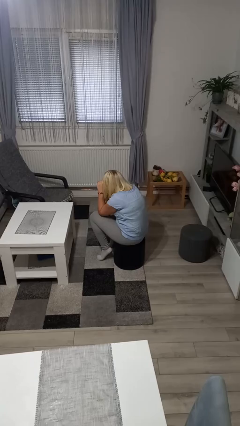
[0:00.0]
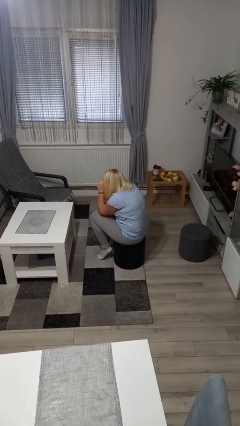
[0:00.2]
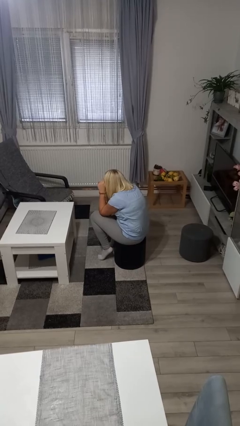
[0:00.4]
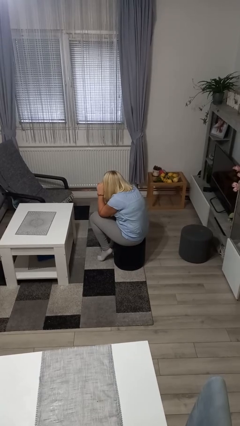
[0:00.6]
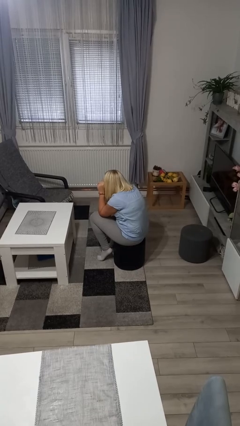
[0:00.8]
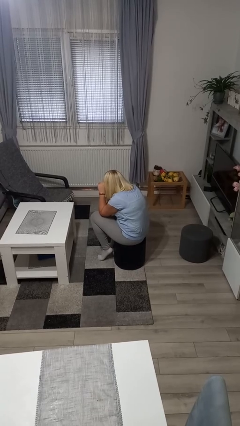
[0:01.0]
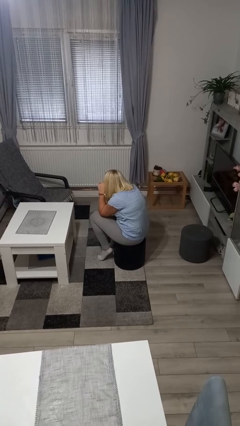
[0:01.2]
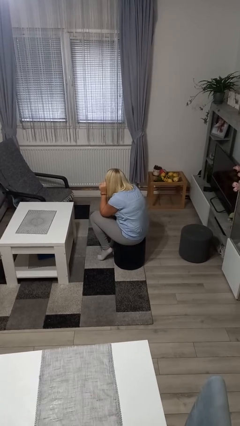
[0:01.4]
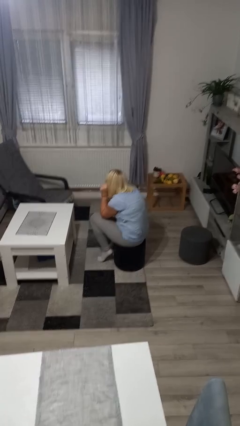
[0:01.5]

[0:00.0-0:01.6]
person rubs eyes

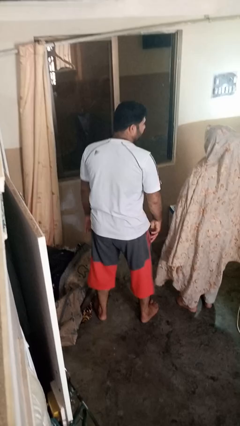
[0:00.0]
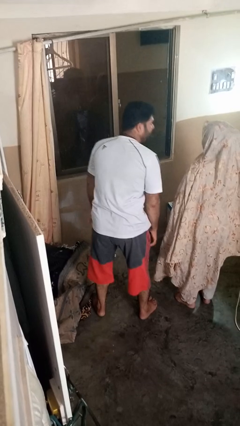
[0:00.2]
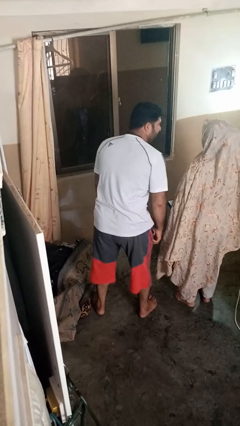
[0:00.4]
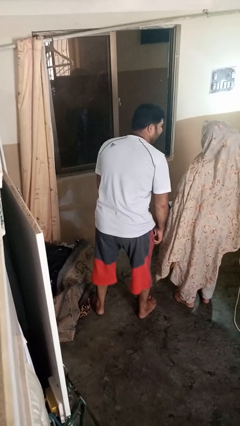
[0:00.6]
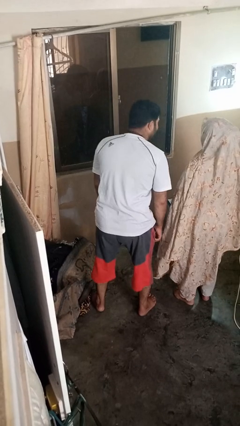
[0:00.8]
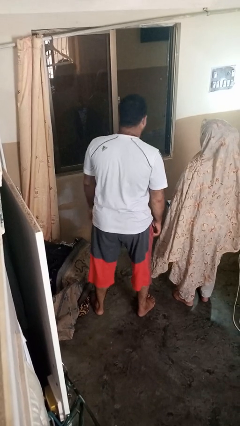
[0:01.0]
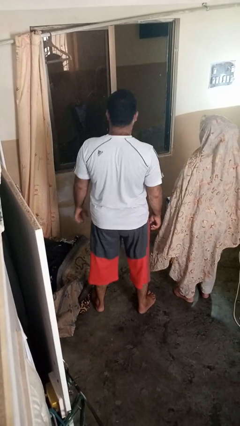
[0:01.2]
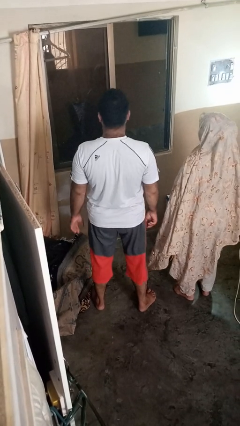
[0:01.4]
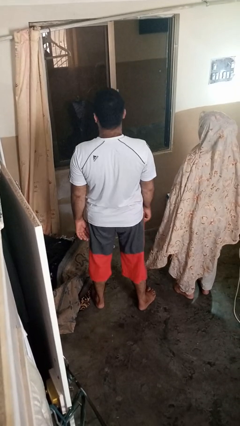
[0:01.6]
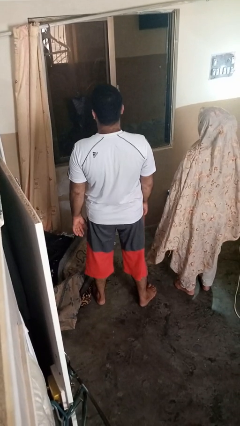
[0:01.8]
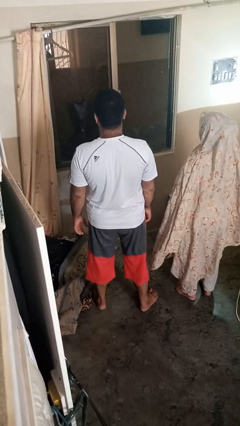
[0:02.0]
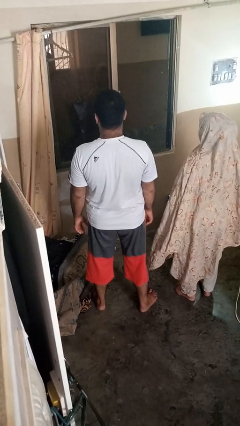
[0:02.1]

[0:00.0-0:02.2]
person laughs with person

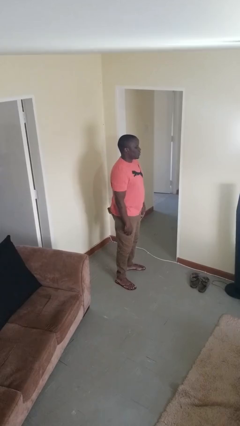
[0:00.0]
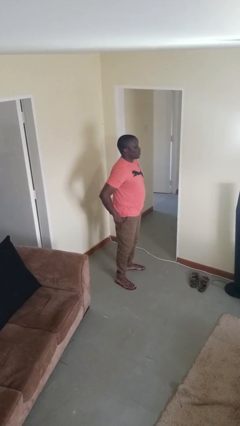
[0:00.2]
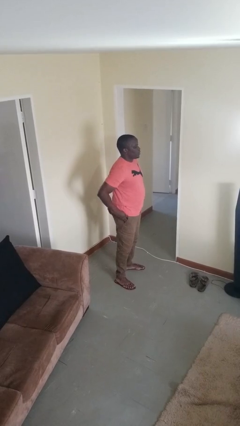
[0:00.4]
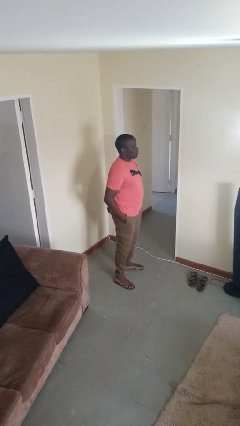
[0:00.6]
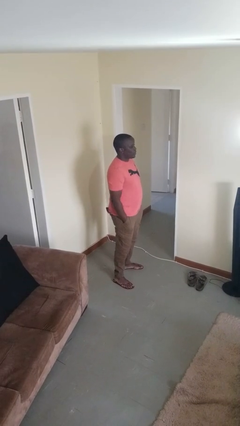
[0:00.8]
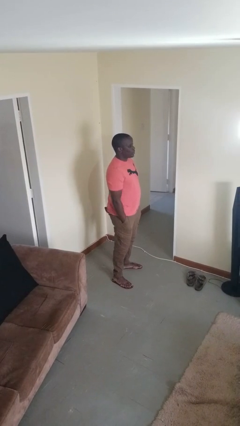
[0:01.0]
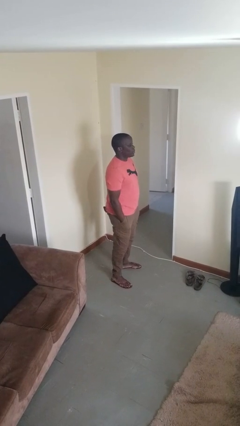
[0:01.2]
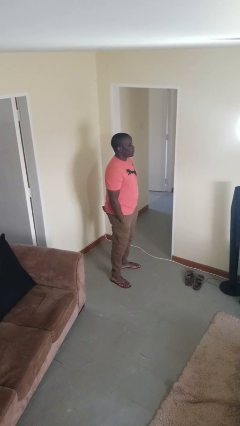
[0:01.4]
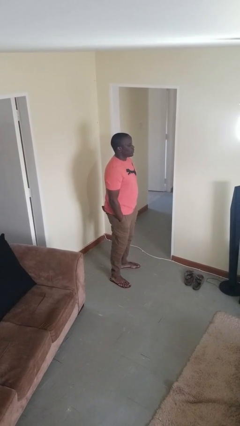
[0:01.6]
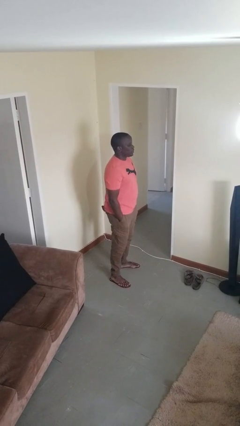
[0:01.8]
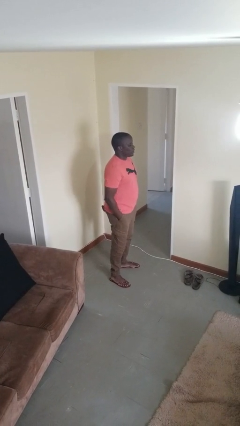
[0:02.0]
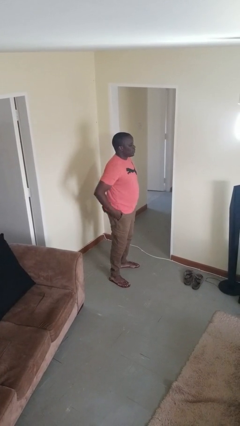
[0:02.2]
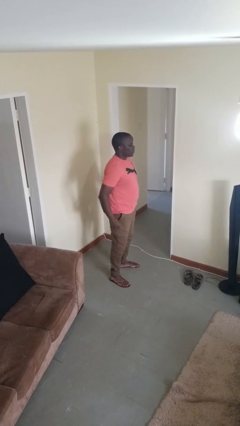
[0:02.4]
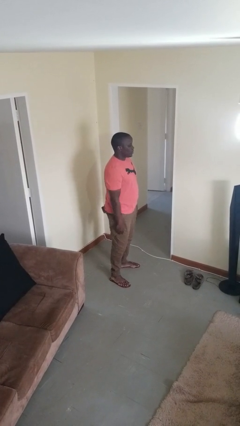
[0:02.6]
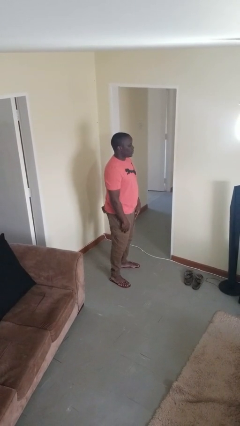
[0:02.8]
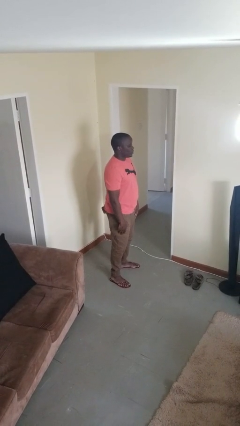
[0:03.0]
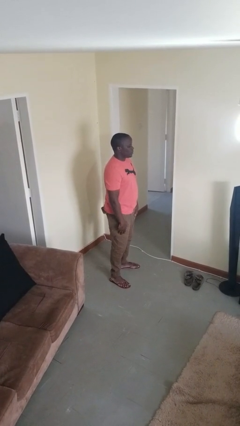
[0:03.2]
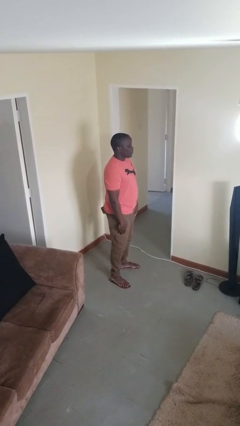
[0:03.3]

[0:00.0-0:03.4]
person puts hands in back pockets

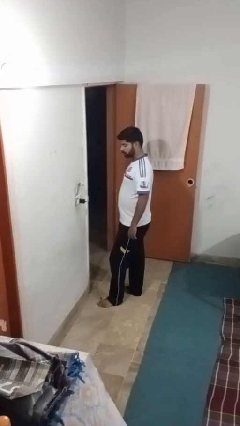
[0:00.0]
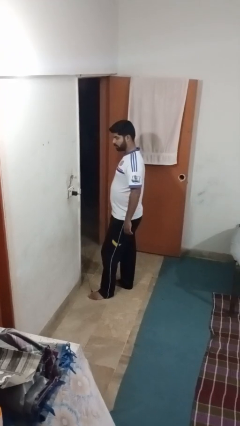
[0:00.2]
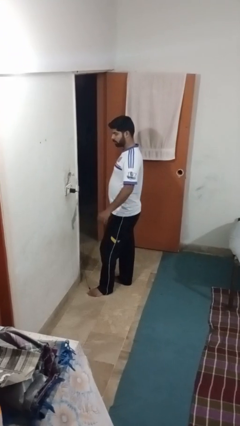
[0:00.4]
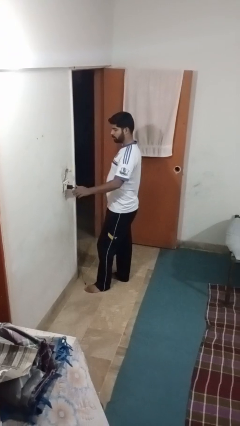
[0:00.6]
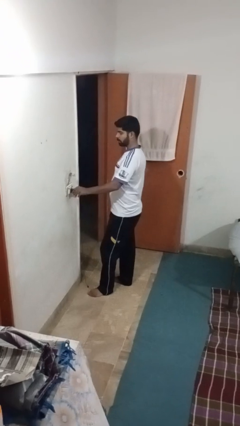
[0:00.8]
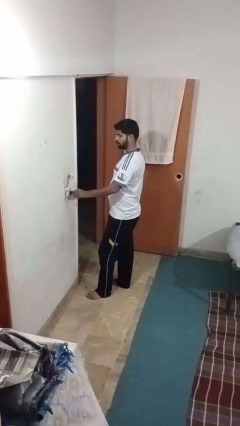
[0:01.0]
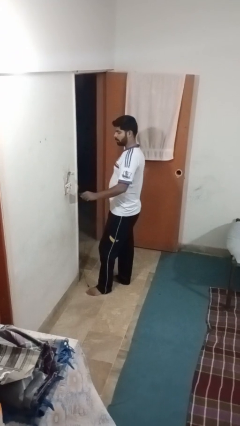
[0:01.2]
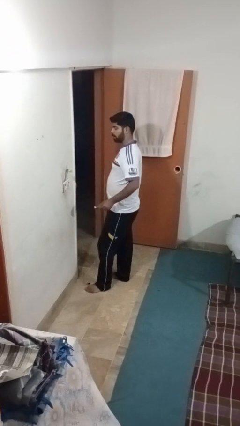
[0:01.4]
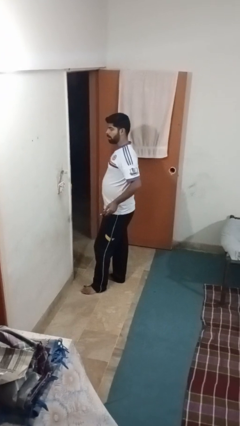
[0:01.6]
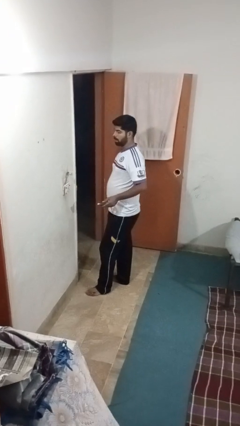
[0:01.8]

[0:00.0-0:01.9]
person unplugs from electrical socket

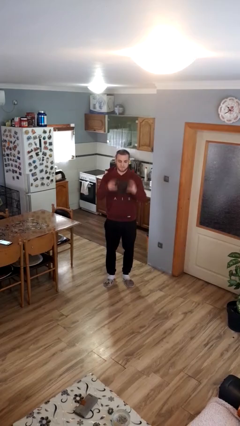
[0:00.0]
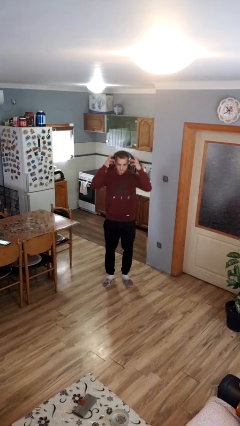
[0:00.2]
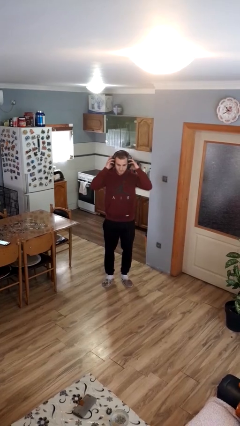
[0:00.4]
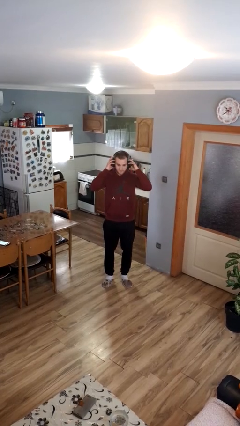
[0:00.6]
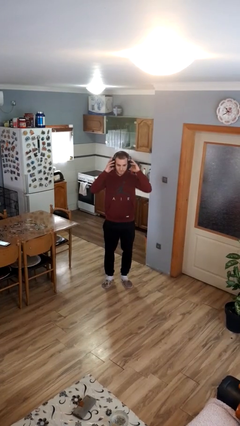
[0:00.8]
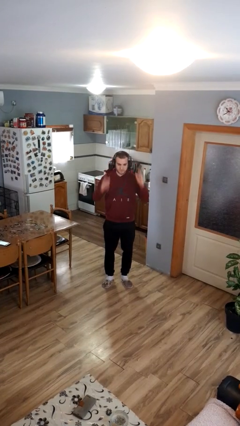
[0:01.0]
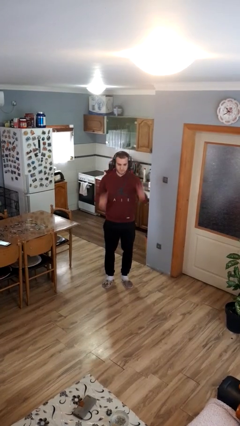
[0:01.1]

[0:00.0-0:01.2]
person puts on headphones

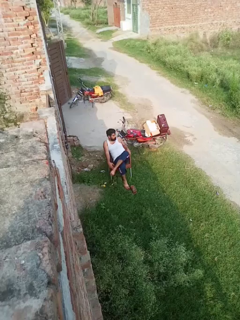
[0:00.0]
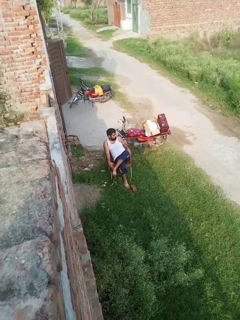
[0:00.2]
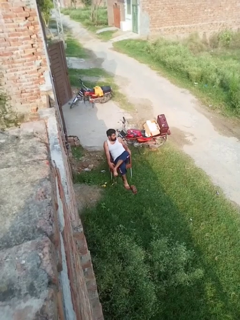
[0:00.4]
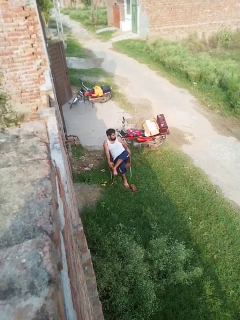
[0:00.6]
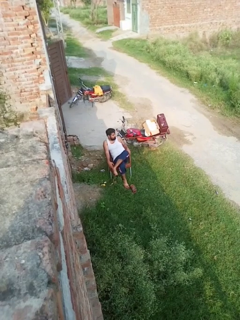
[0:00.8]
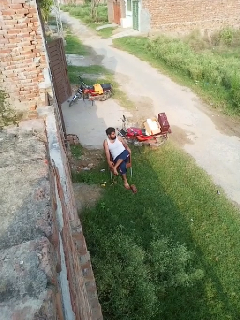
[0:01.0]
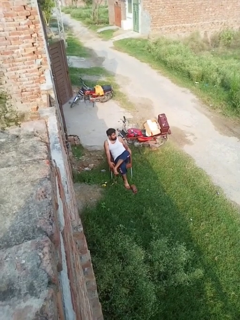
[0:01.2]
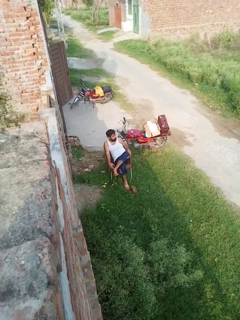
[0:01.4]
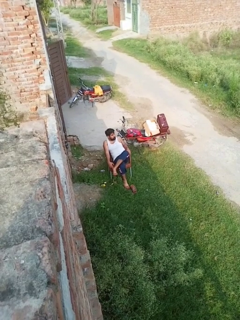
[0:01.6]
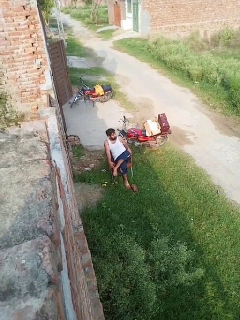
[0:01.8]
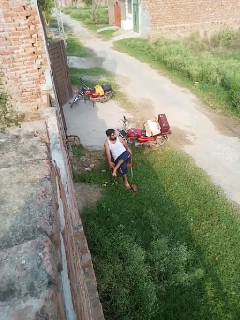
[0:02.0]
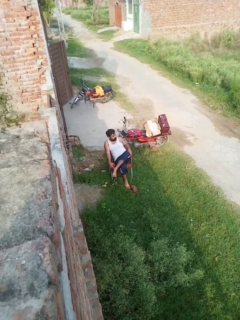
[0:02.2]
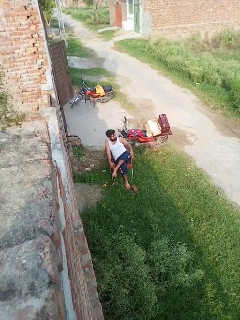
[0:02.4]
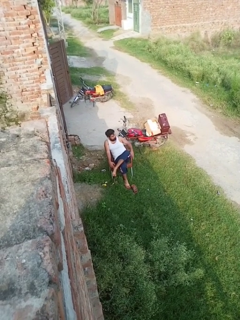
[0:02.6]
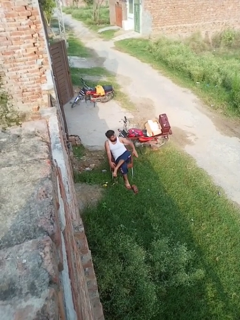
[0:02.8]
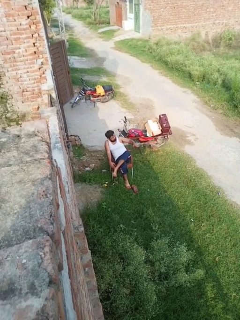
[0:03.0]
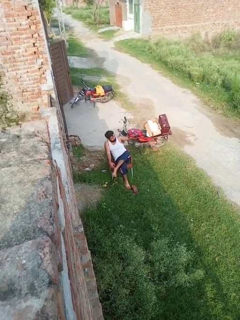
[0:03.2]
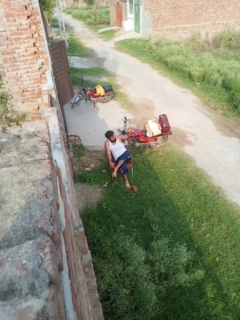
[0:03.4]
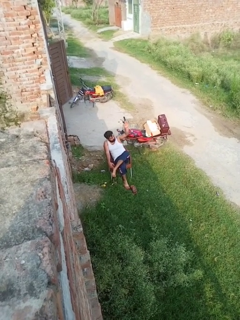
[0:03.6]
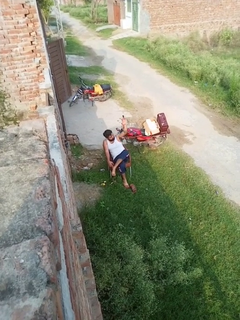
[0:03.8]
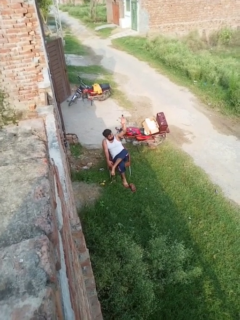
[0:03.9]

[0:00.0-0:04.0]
person gestures swipe up

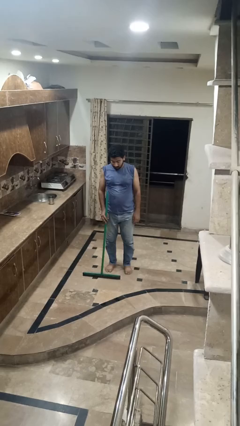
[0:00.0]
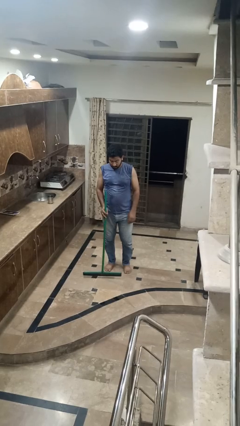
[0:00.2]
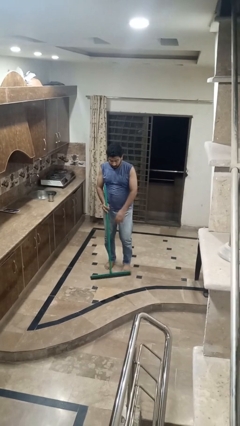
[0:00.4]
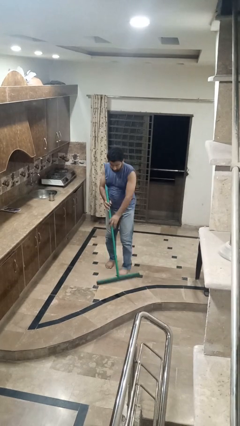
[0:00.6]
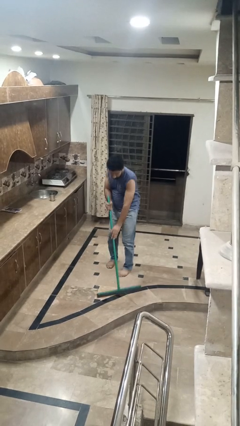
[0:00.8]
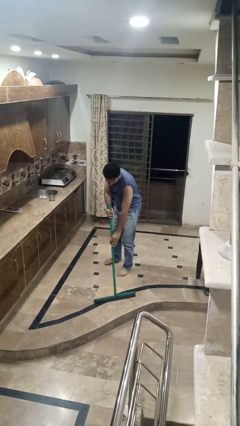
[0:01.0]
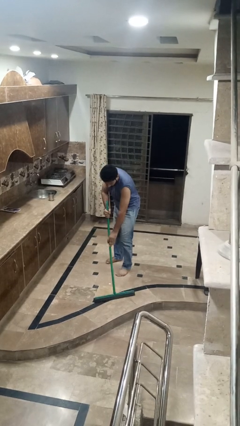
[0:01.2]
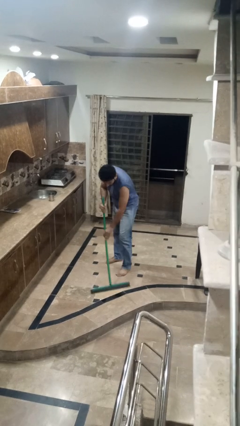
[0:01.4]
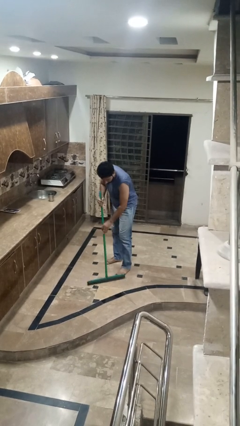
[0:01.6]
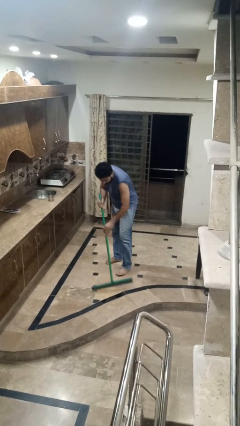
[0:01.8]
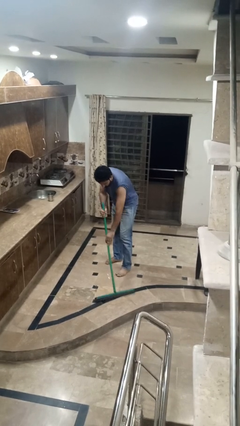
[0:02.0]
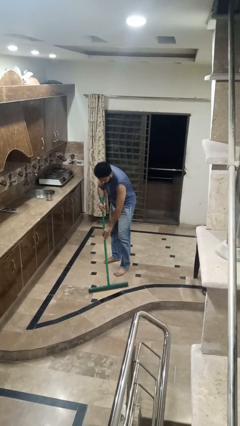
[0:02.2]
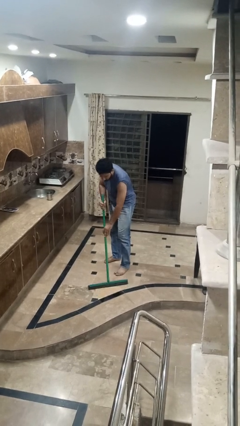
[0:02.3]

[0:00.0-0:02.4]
person mops

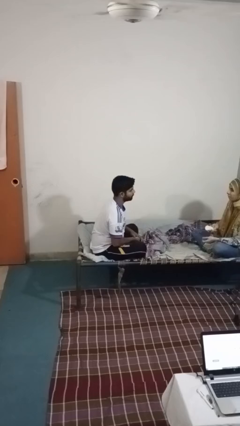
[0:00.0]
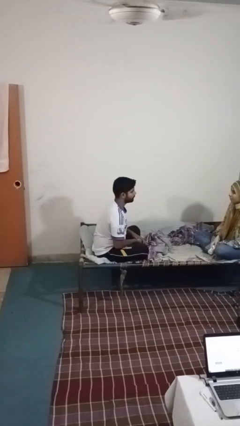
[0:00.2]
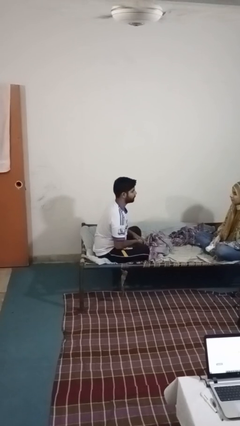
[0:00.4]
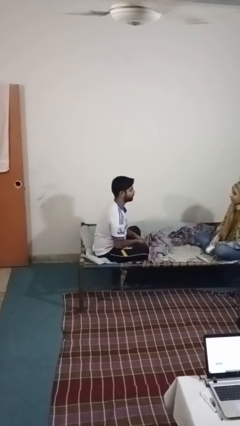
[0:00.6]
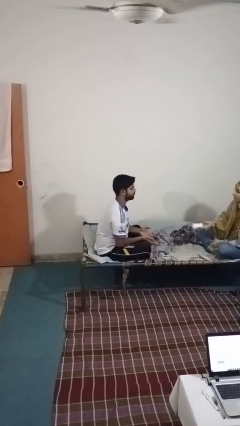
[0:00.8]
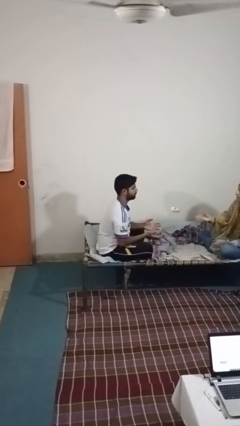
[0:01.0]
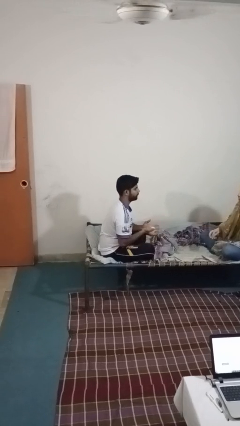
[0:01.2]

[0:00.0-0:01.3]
person catches object from person

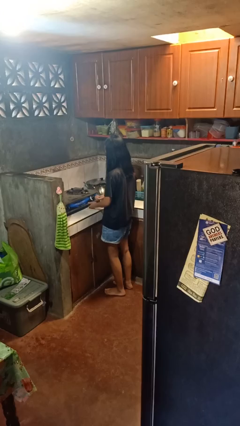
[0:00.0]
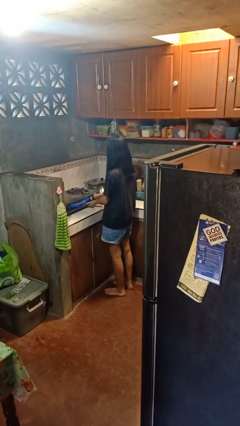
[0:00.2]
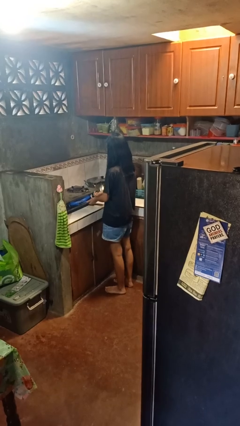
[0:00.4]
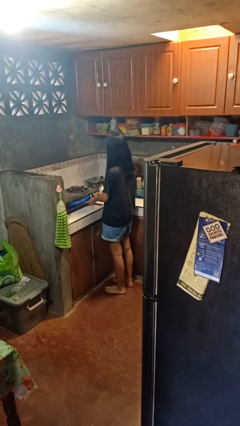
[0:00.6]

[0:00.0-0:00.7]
person turns on stovetop
